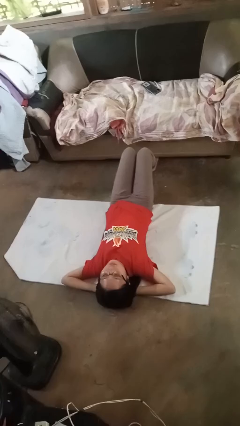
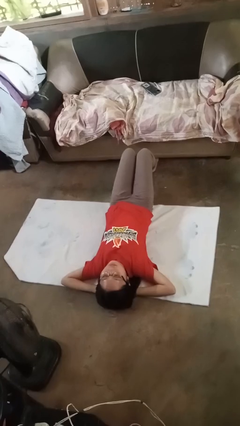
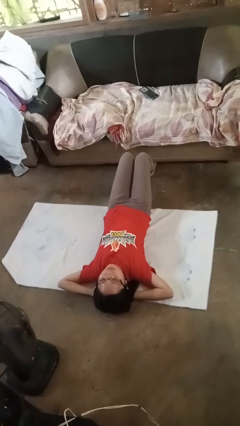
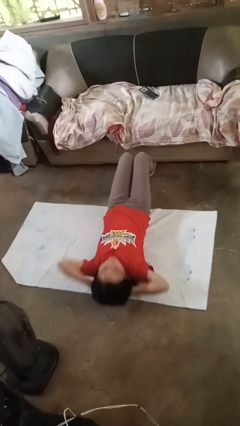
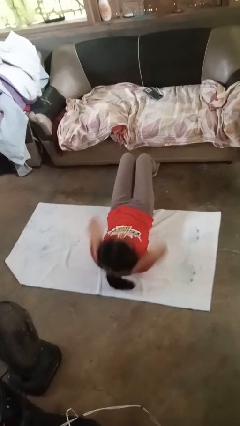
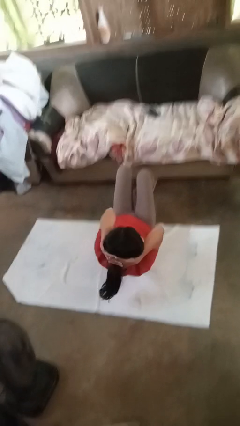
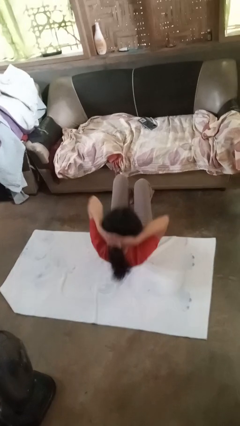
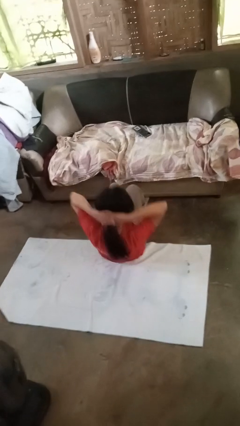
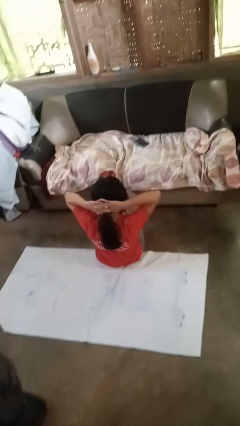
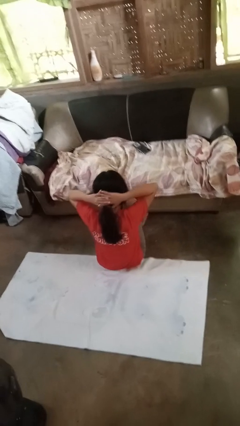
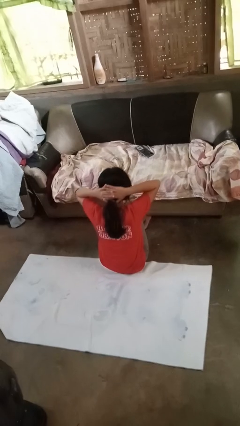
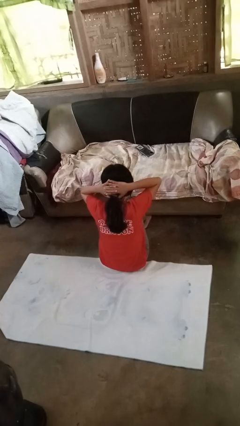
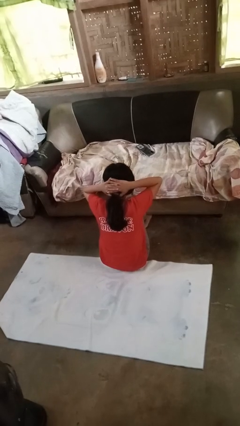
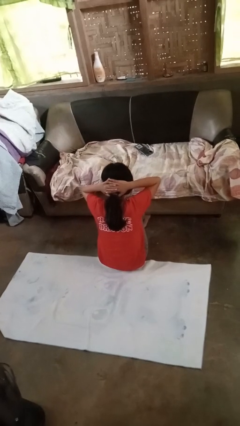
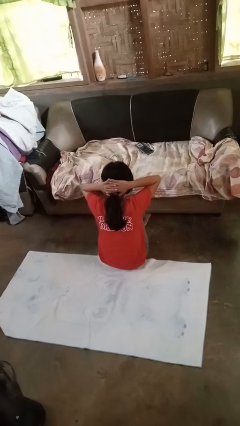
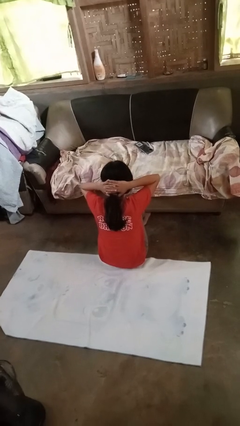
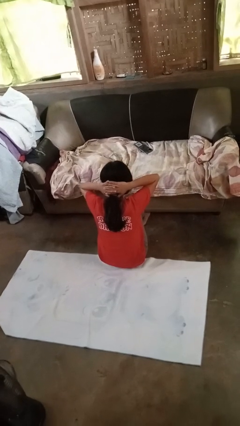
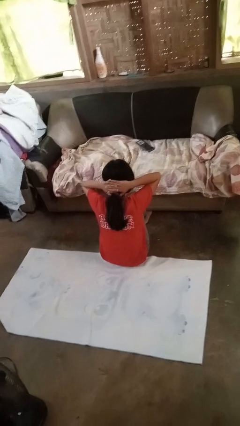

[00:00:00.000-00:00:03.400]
person exercises with situp

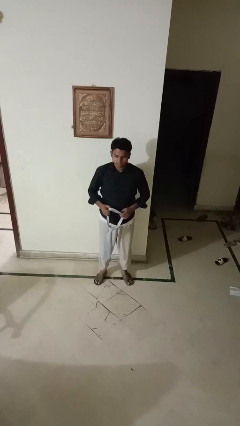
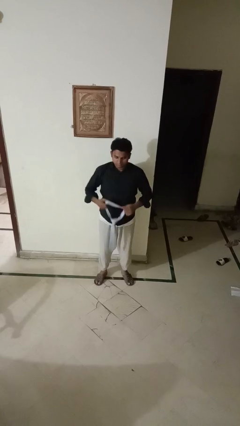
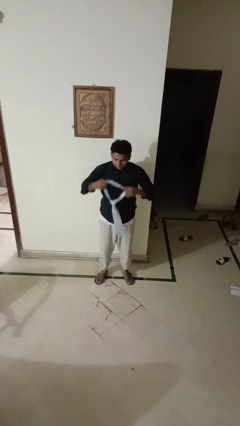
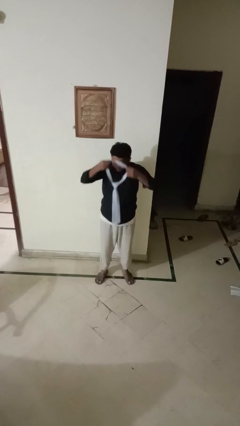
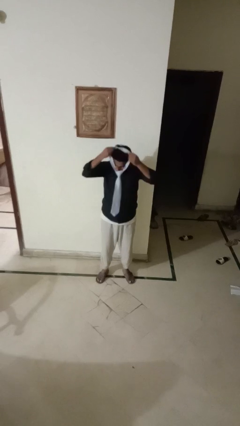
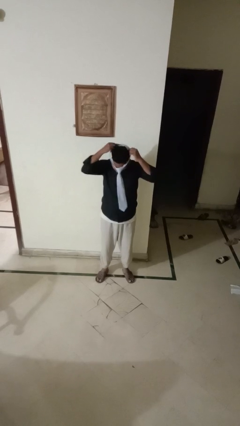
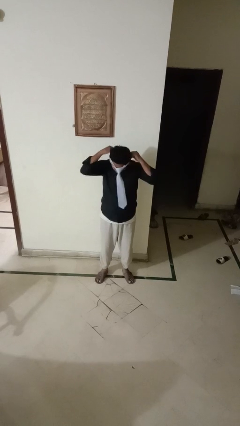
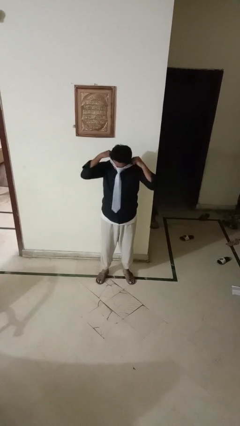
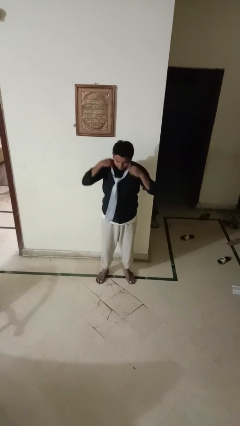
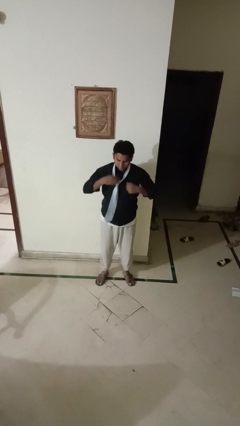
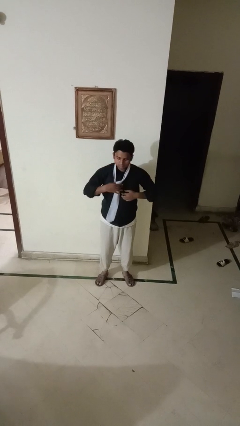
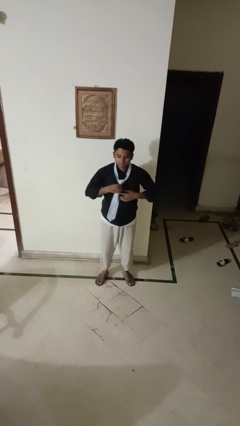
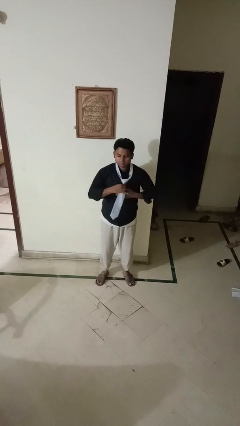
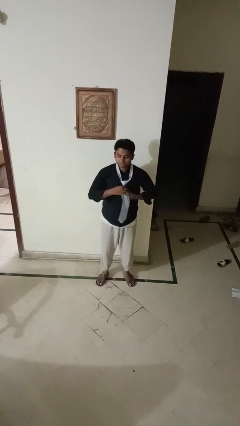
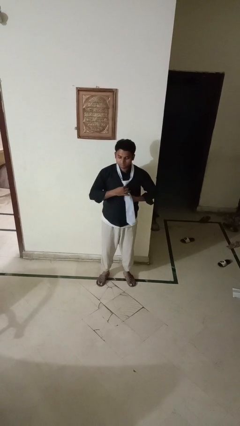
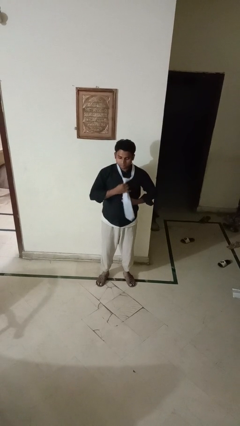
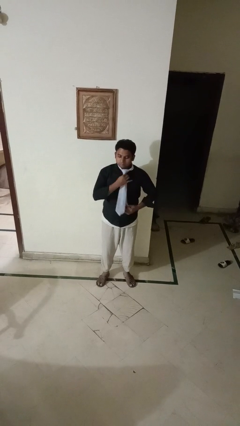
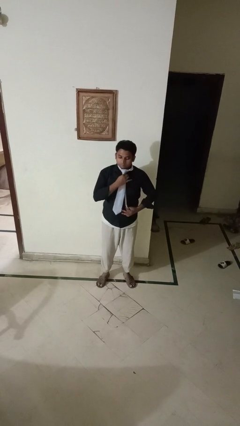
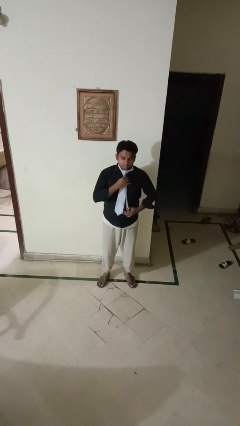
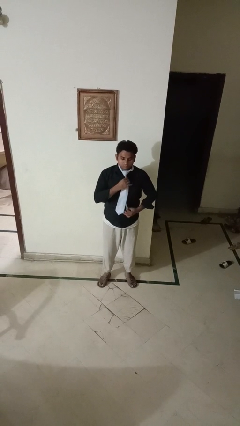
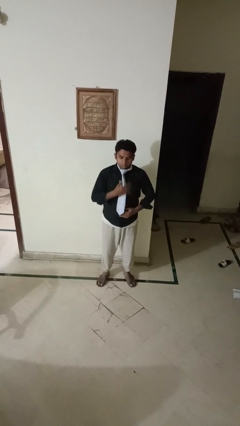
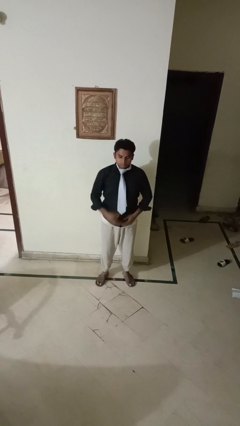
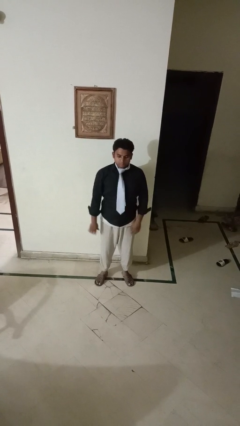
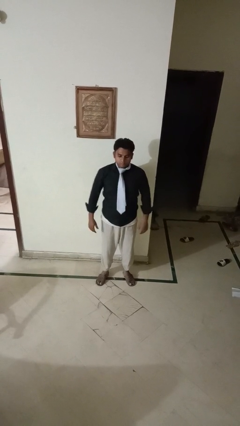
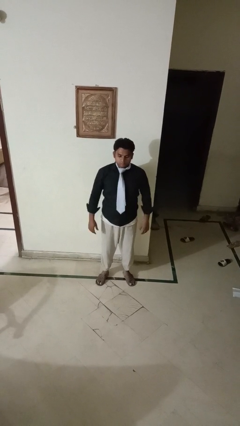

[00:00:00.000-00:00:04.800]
person puts on necktie

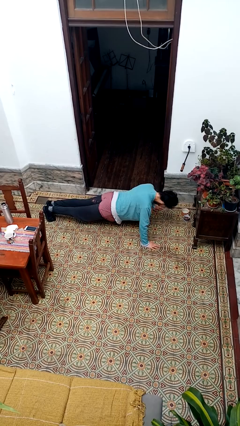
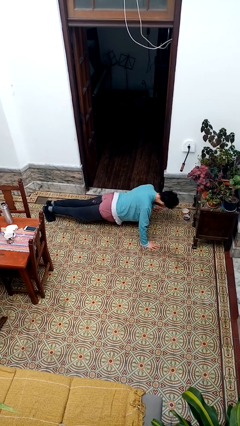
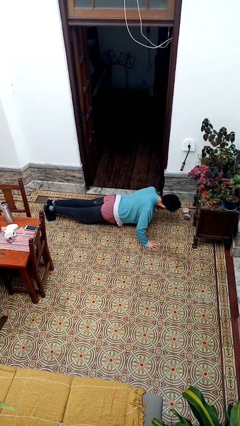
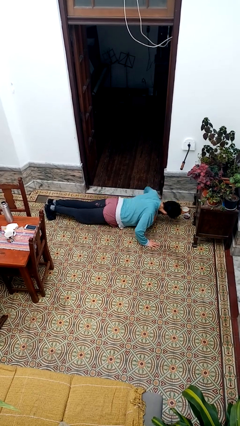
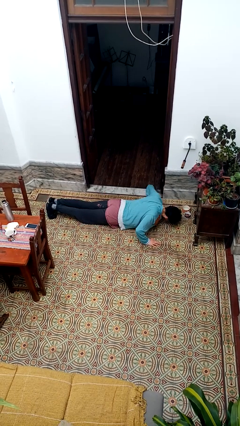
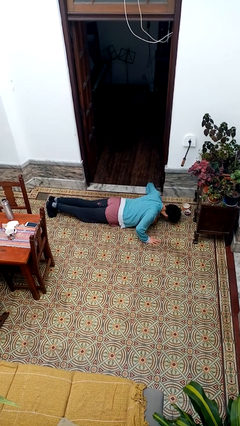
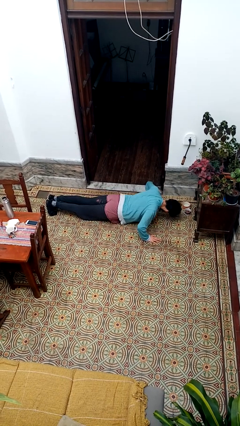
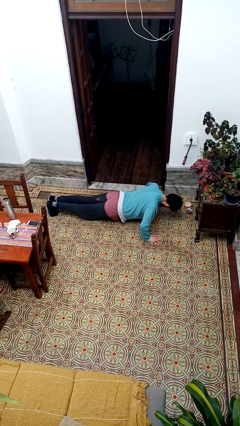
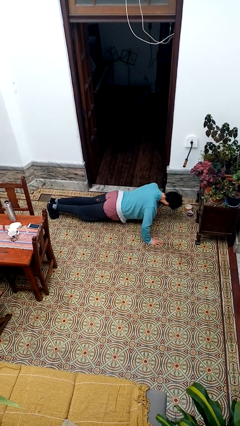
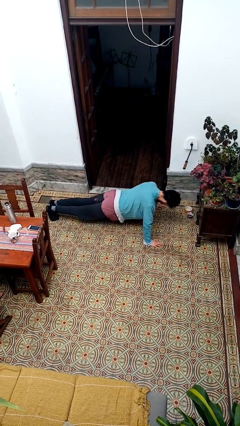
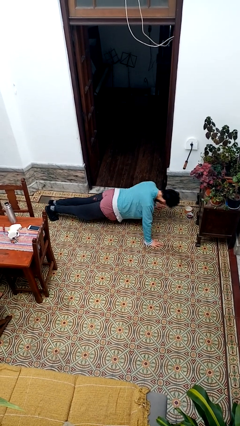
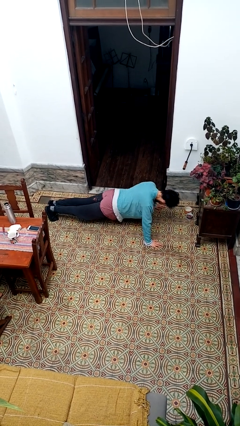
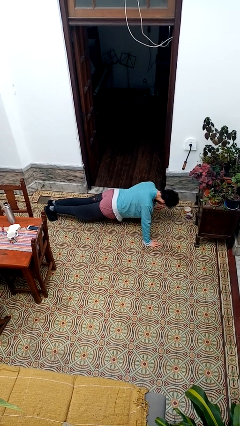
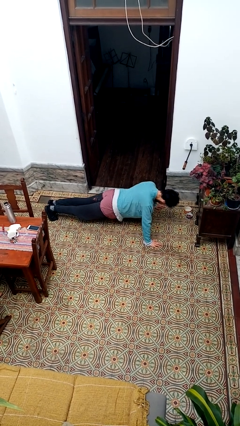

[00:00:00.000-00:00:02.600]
person exercises with pushup

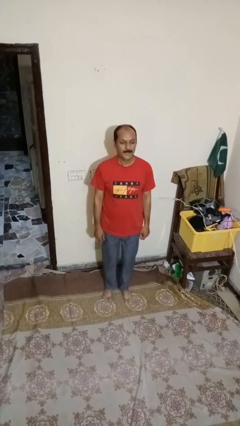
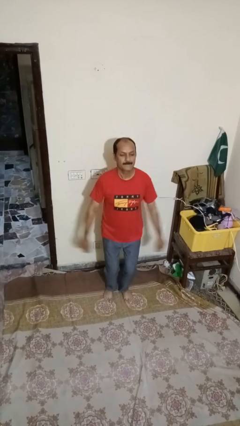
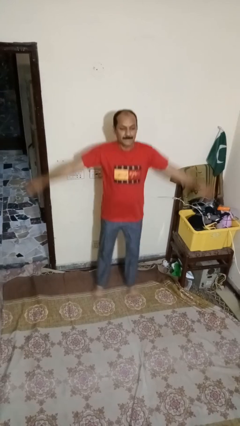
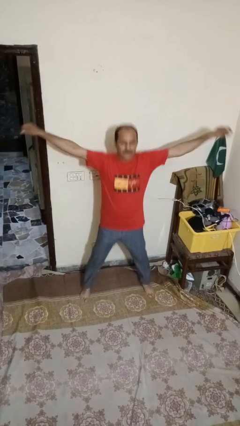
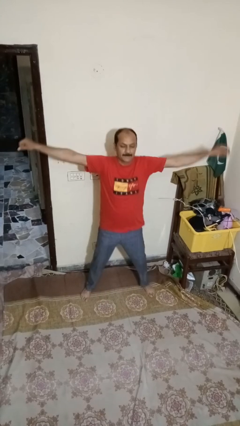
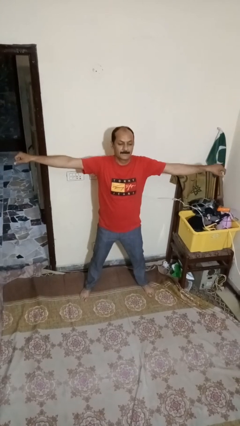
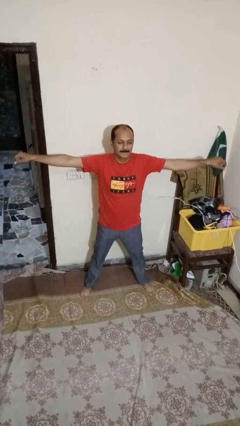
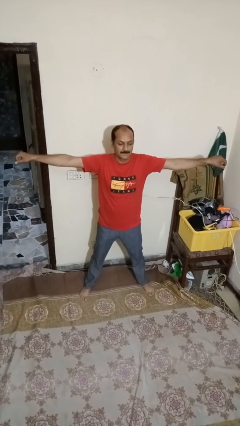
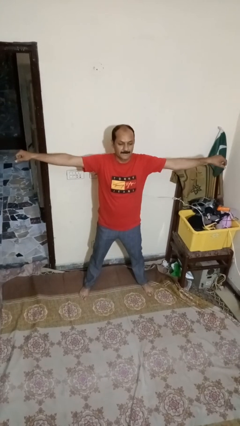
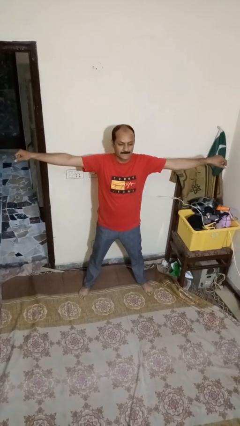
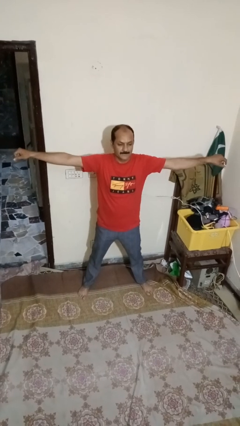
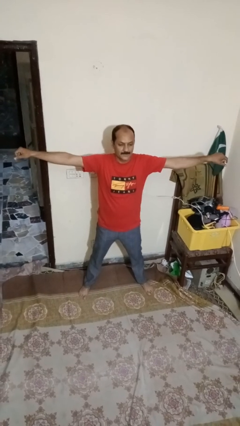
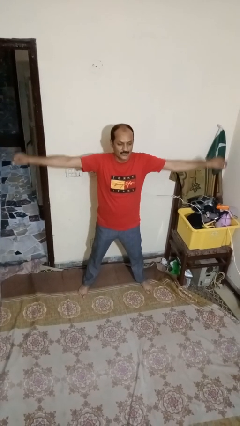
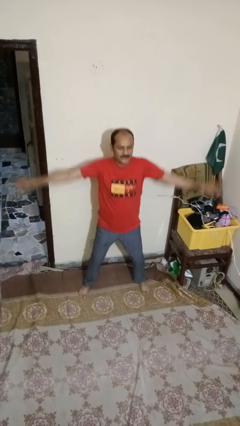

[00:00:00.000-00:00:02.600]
person exercises with jumping jacks

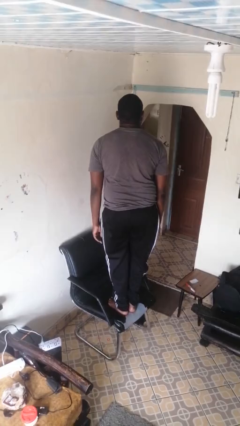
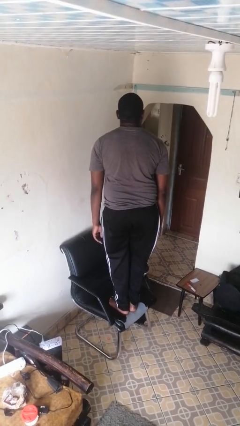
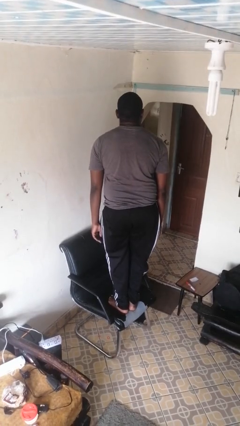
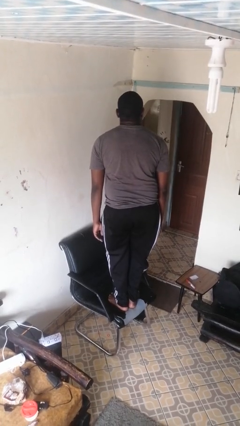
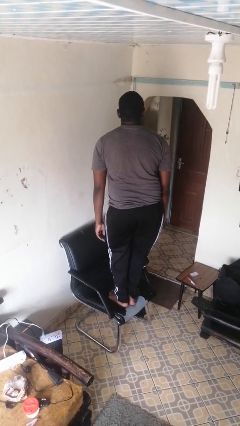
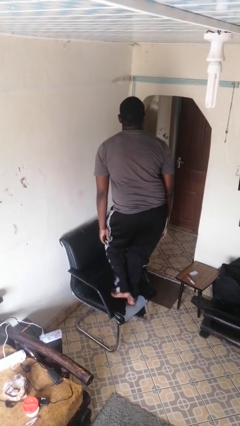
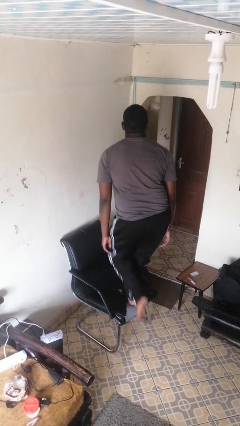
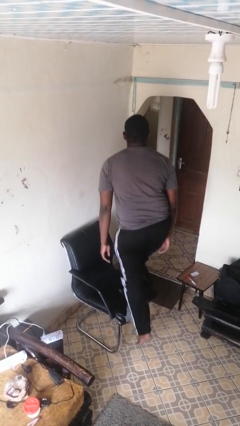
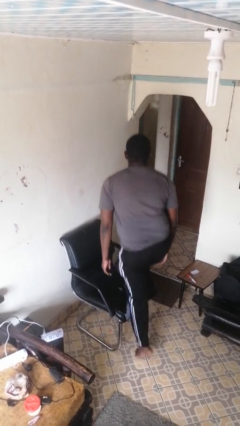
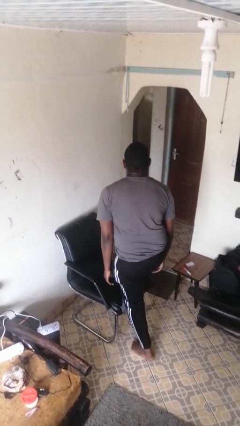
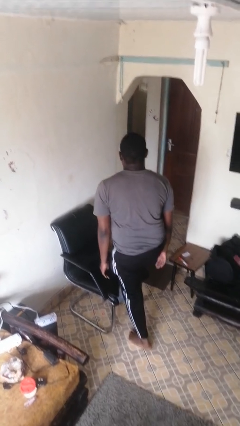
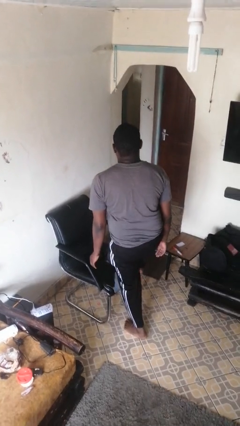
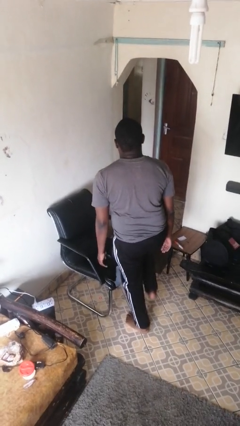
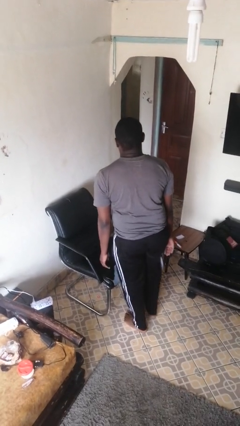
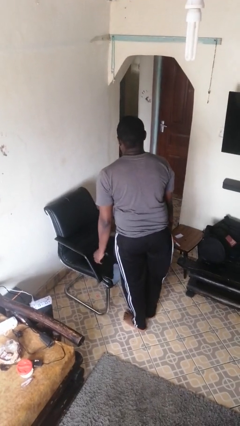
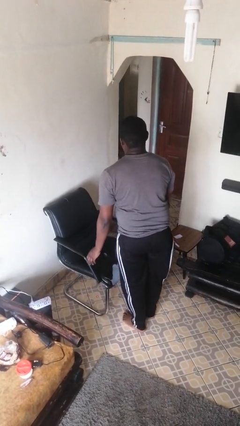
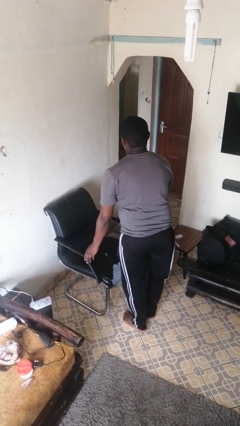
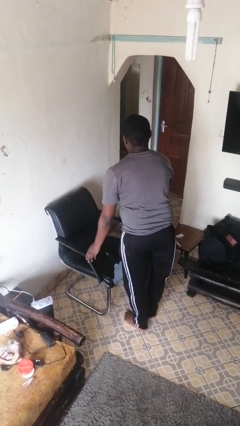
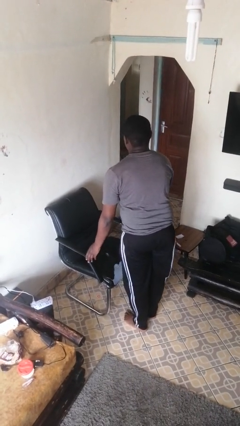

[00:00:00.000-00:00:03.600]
person climbs off chair

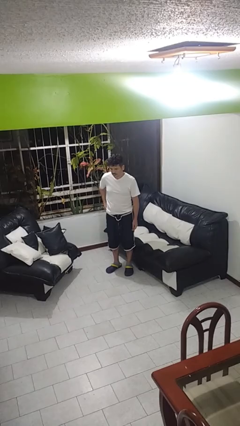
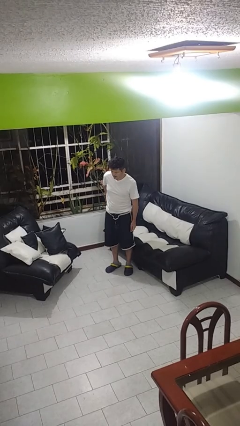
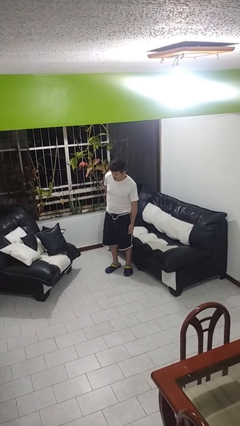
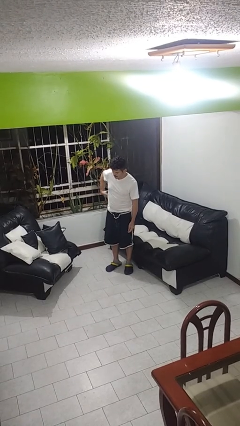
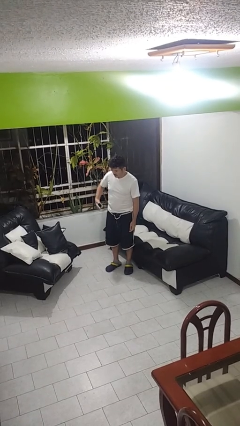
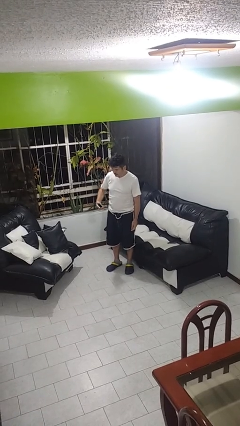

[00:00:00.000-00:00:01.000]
person takes phone from pocket
